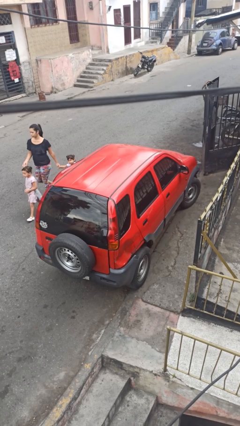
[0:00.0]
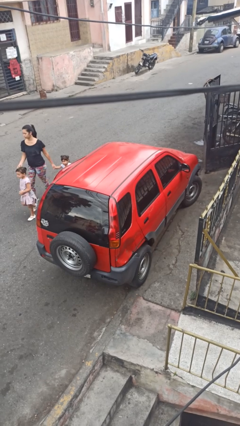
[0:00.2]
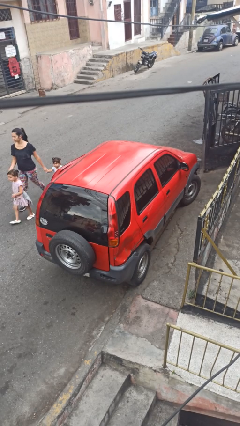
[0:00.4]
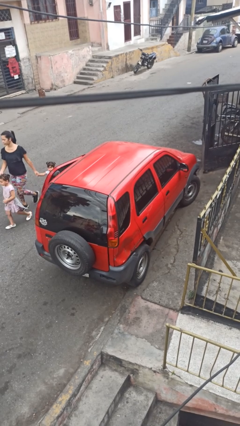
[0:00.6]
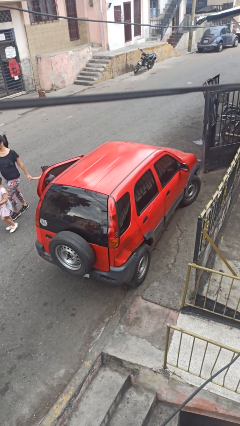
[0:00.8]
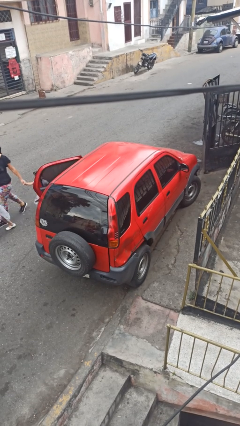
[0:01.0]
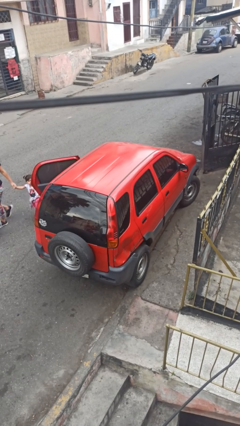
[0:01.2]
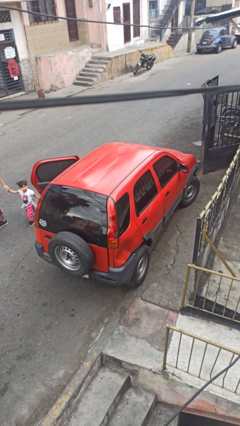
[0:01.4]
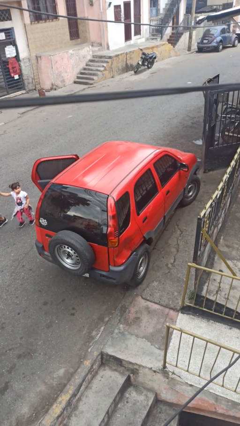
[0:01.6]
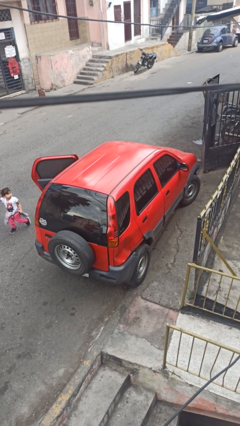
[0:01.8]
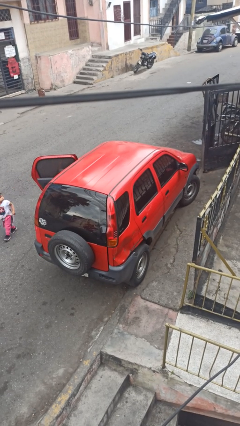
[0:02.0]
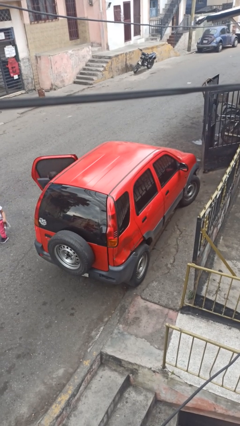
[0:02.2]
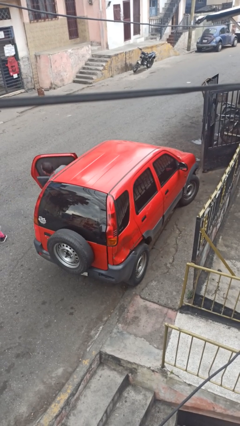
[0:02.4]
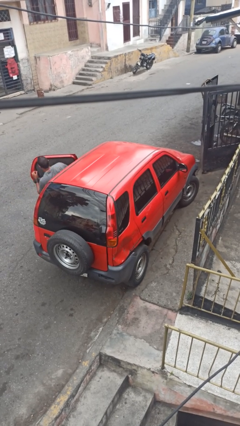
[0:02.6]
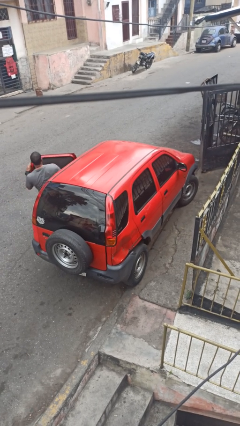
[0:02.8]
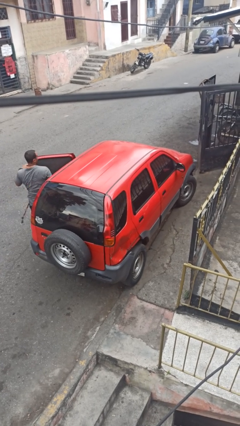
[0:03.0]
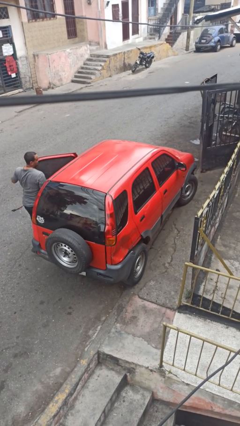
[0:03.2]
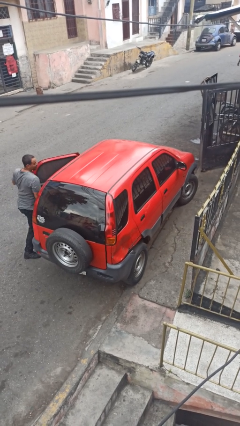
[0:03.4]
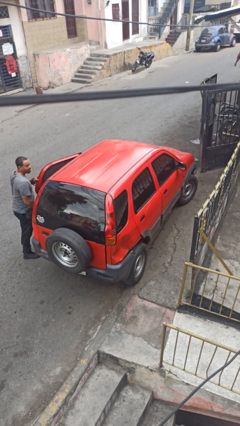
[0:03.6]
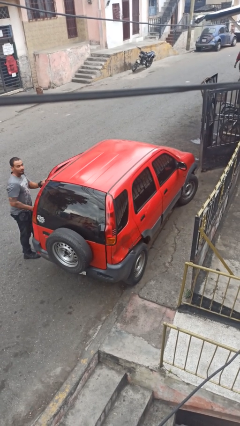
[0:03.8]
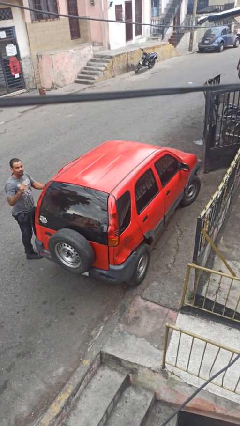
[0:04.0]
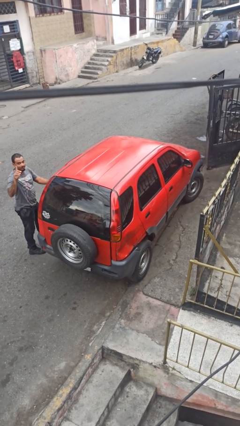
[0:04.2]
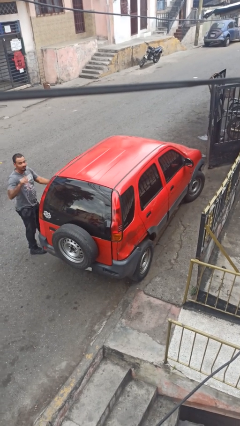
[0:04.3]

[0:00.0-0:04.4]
car drops off person

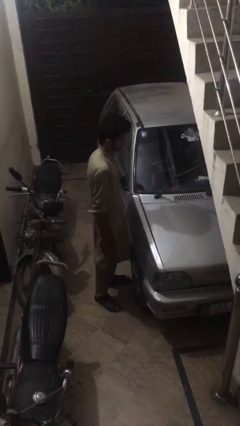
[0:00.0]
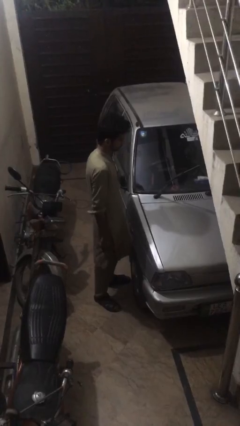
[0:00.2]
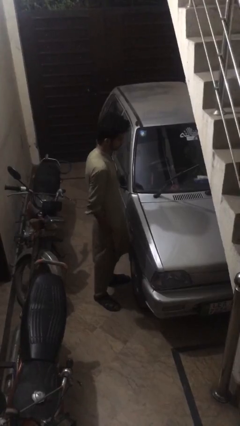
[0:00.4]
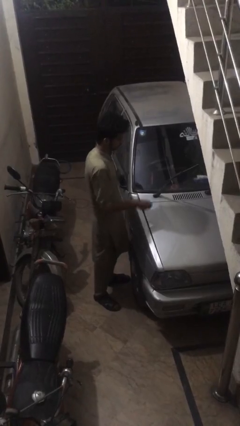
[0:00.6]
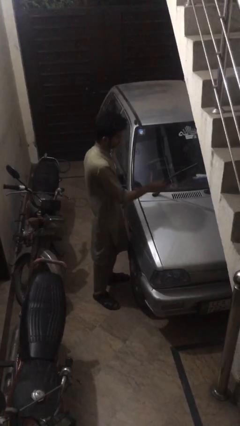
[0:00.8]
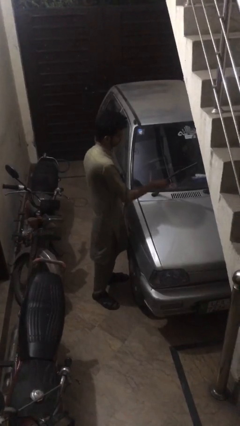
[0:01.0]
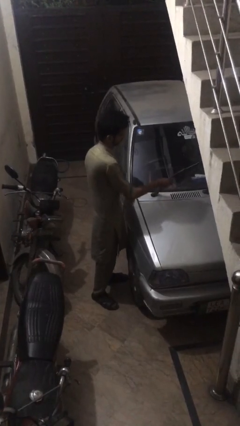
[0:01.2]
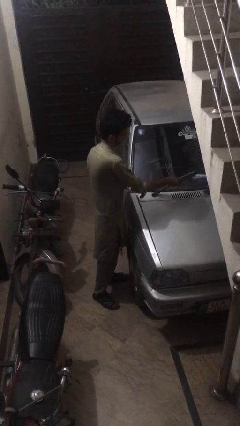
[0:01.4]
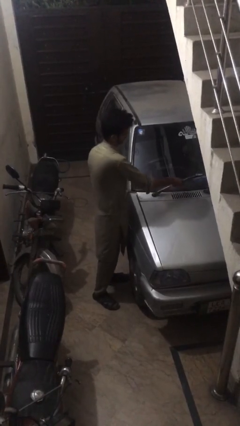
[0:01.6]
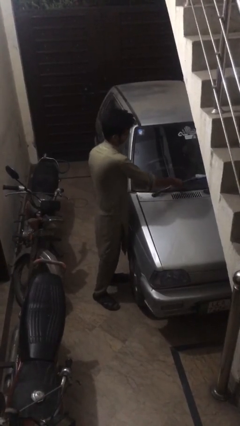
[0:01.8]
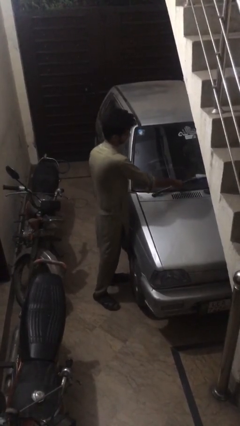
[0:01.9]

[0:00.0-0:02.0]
person flips down car wipers

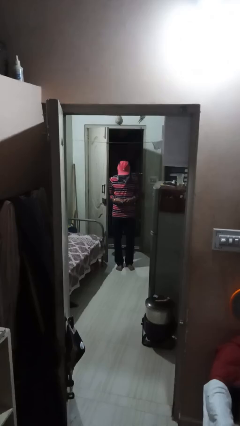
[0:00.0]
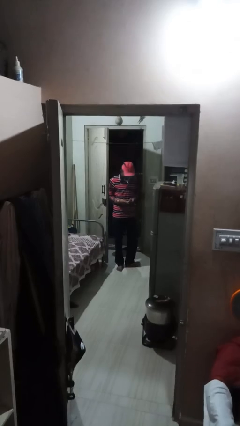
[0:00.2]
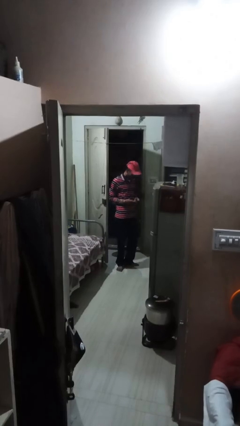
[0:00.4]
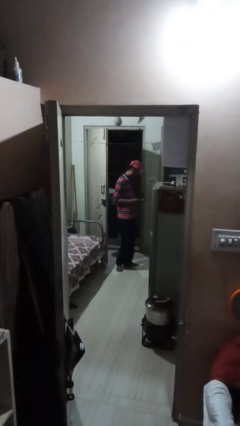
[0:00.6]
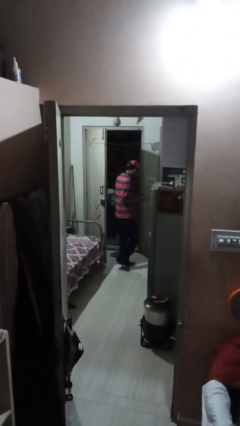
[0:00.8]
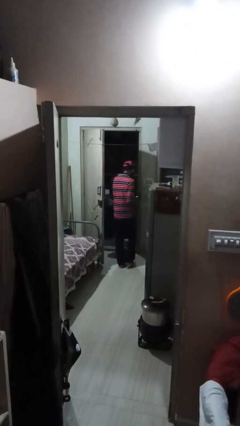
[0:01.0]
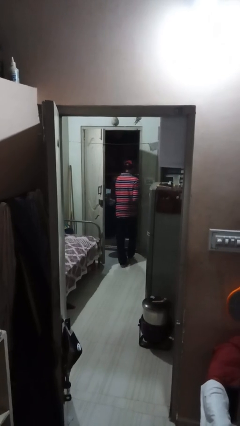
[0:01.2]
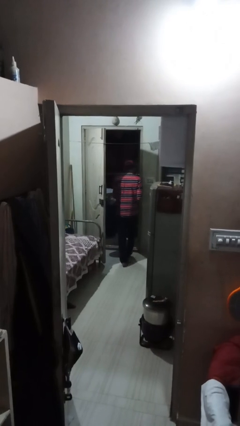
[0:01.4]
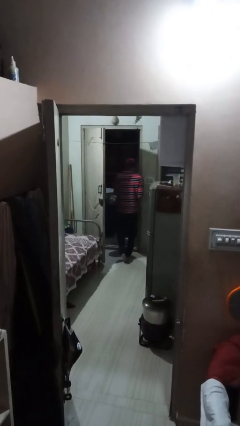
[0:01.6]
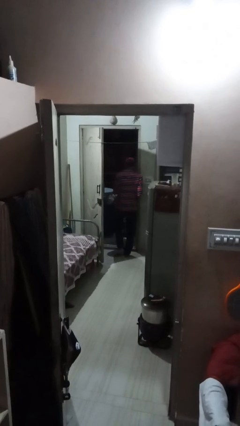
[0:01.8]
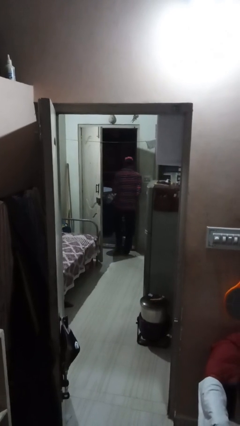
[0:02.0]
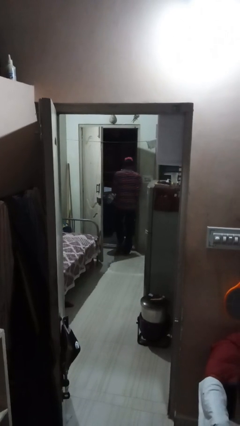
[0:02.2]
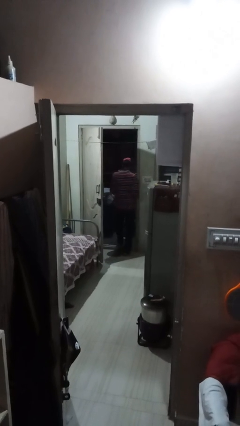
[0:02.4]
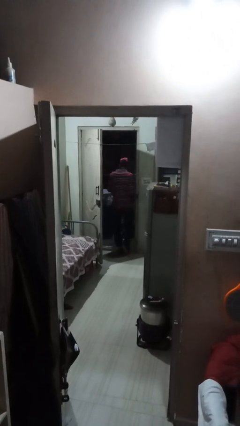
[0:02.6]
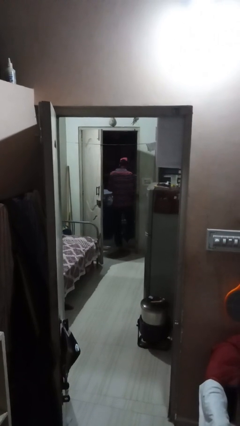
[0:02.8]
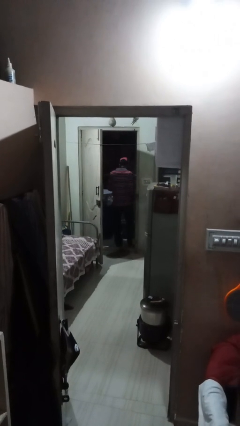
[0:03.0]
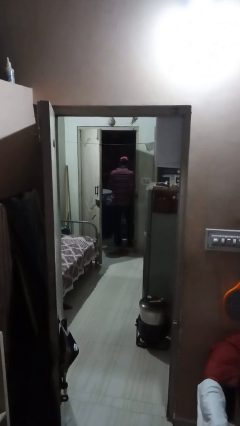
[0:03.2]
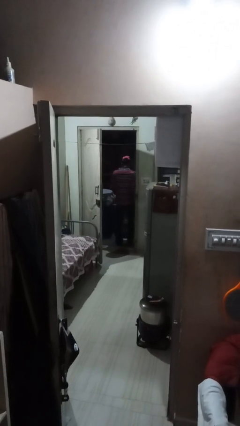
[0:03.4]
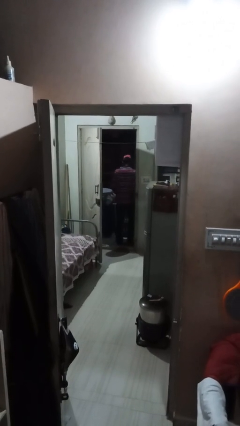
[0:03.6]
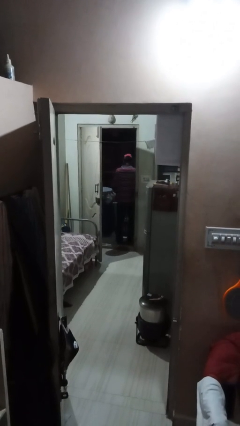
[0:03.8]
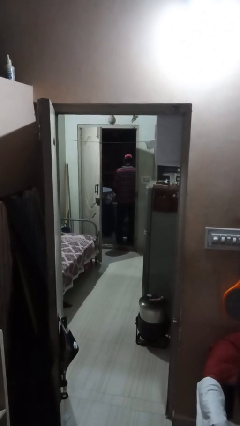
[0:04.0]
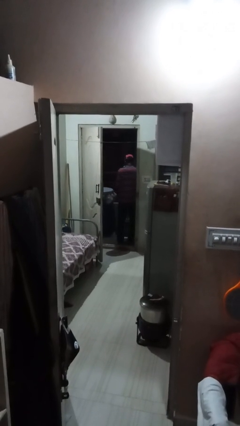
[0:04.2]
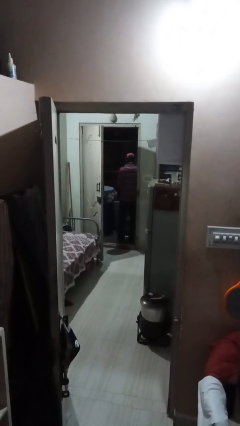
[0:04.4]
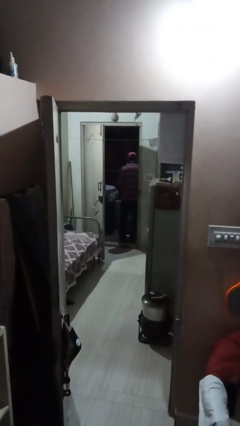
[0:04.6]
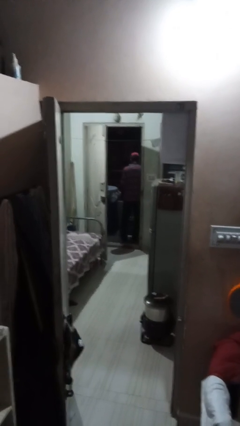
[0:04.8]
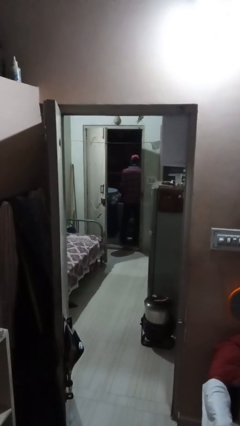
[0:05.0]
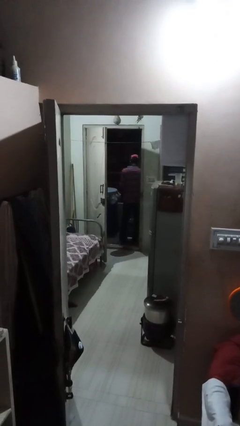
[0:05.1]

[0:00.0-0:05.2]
person exits scene through structure

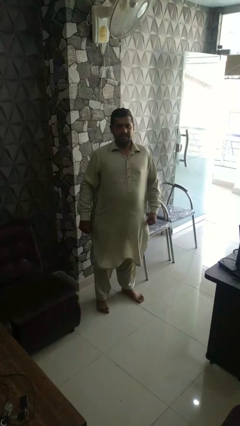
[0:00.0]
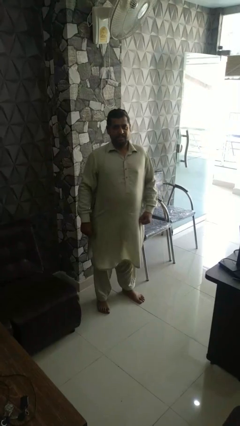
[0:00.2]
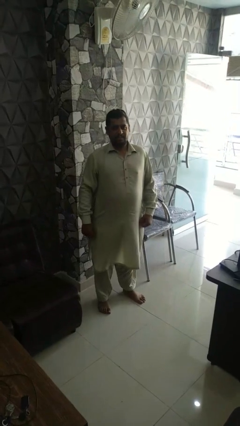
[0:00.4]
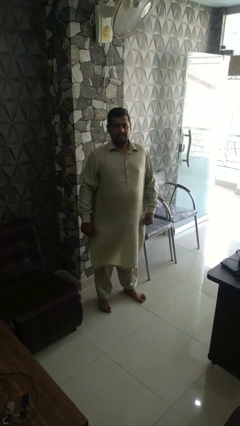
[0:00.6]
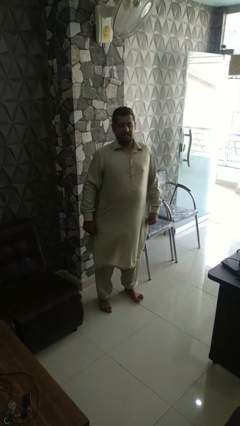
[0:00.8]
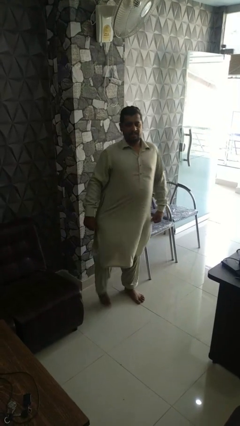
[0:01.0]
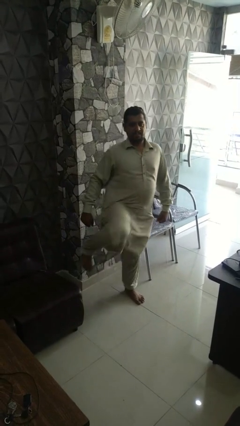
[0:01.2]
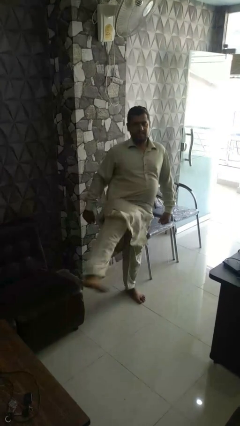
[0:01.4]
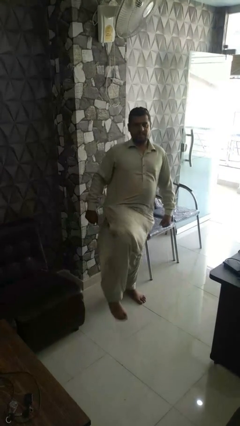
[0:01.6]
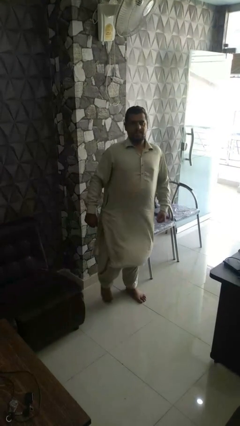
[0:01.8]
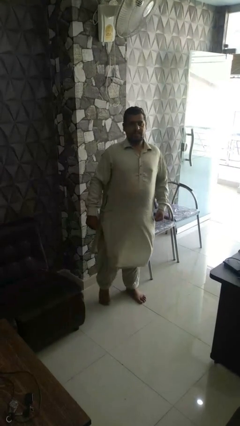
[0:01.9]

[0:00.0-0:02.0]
person karate kicks

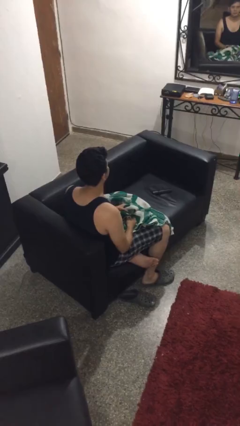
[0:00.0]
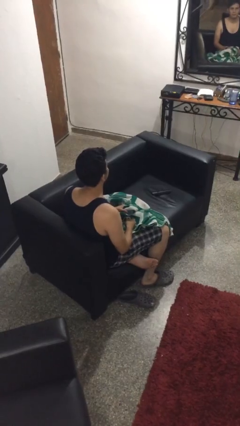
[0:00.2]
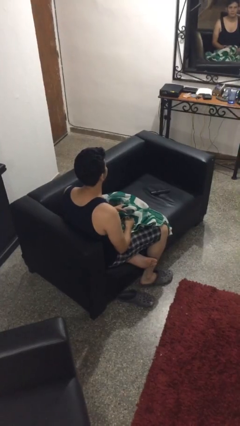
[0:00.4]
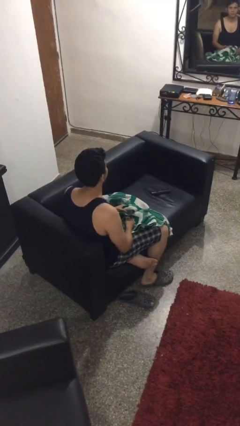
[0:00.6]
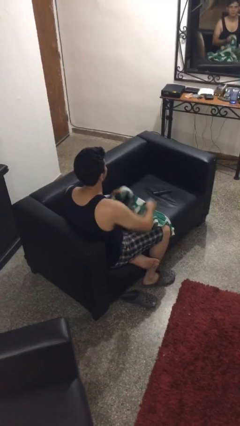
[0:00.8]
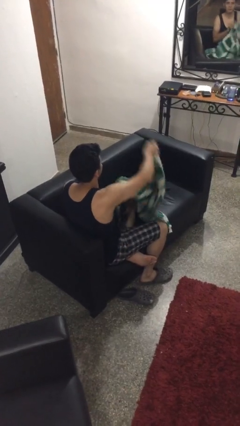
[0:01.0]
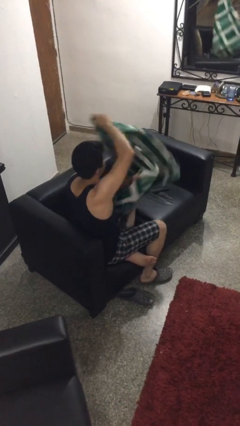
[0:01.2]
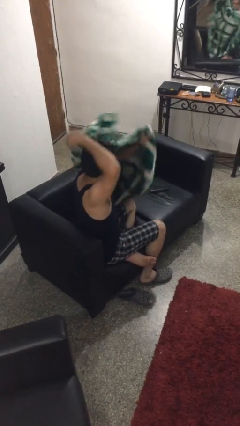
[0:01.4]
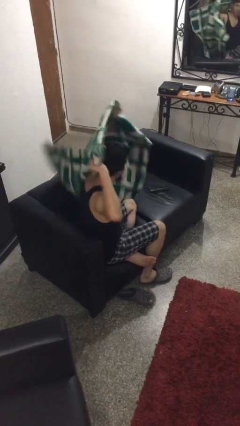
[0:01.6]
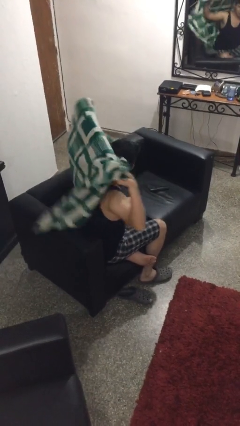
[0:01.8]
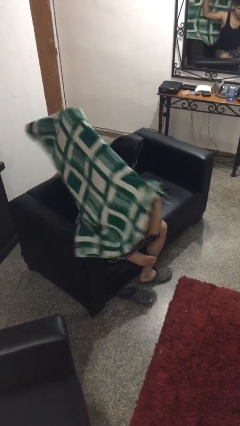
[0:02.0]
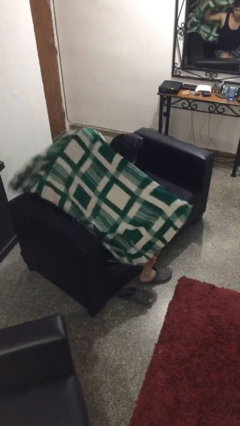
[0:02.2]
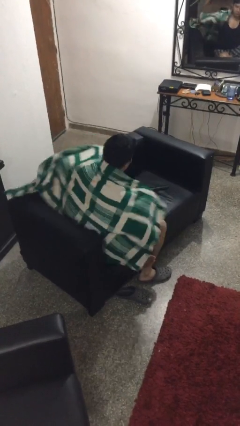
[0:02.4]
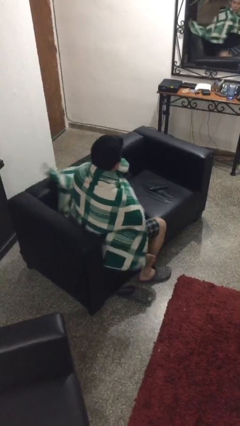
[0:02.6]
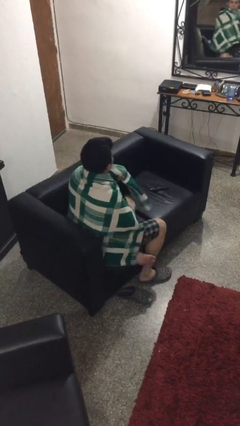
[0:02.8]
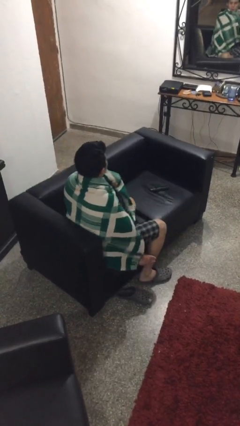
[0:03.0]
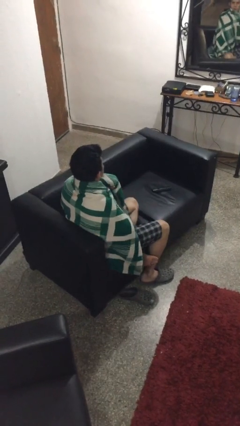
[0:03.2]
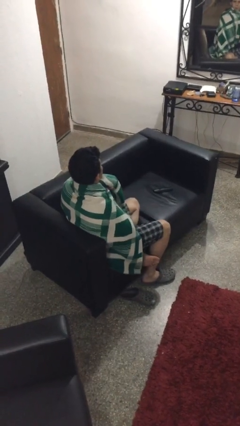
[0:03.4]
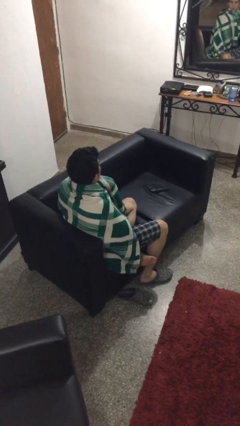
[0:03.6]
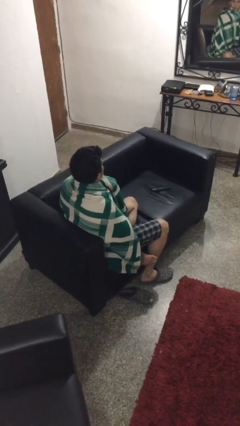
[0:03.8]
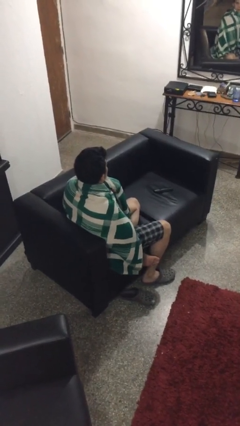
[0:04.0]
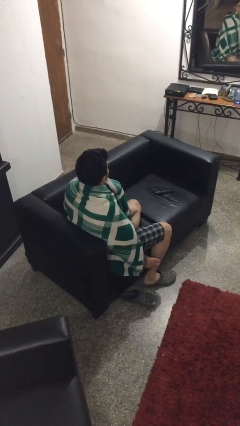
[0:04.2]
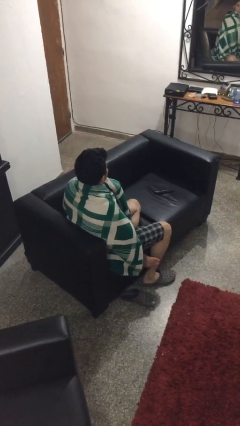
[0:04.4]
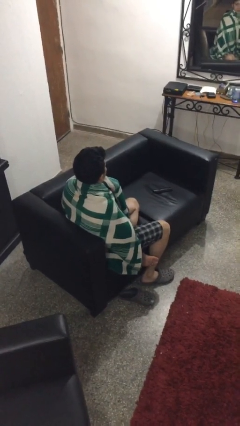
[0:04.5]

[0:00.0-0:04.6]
person covers with blanket
